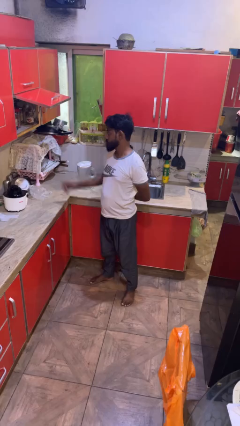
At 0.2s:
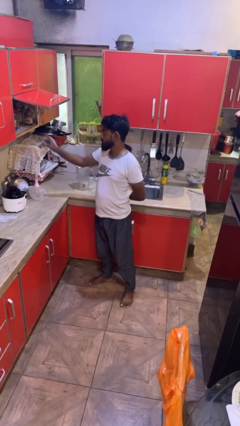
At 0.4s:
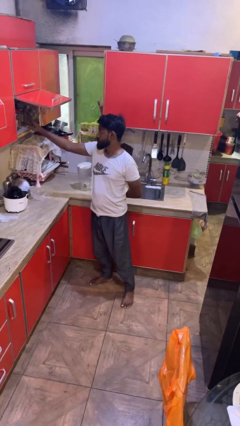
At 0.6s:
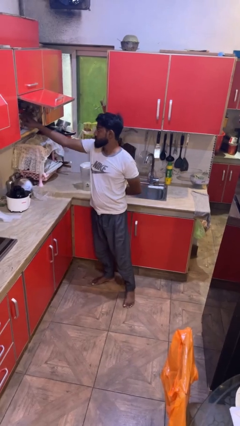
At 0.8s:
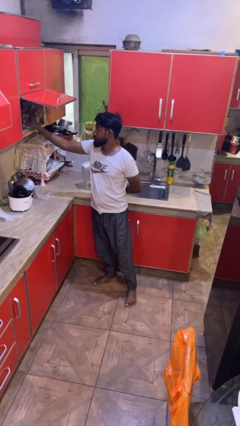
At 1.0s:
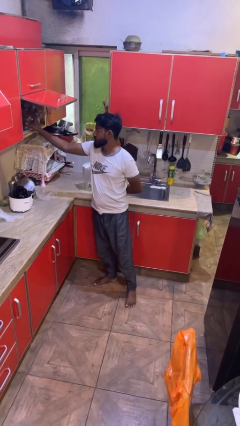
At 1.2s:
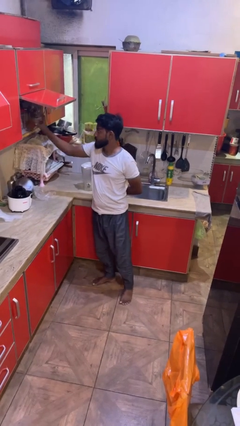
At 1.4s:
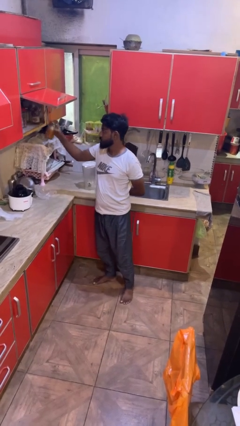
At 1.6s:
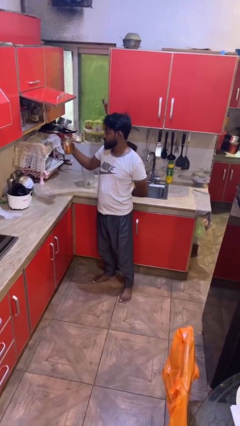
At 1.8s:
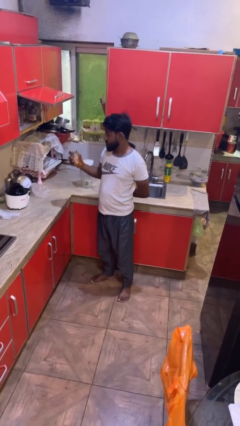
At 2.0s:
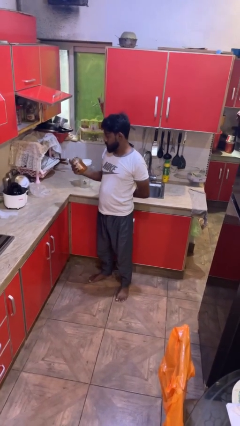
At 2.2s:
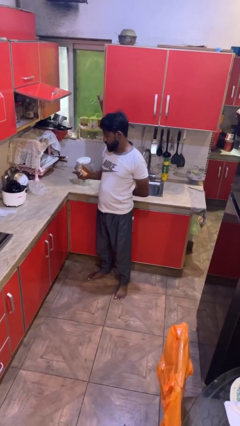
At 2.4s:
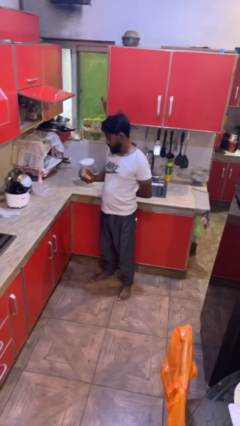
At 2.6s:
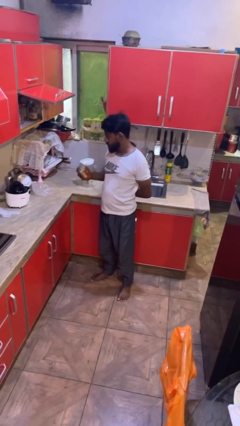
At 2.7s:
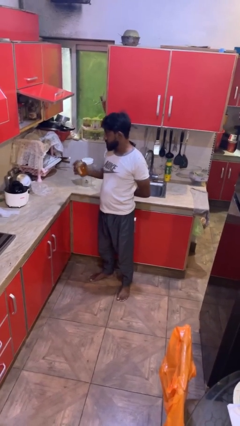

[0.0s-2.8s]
person picks up object from cabinet

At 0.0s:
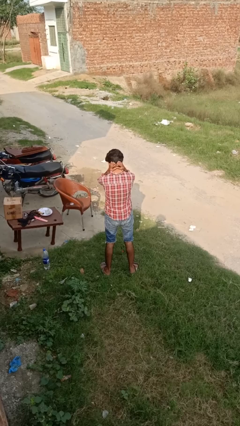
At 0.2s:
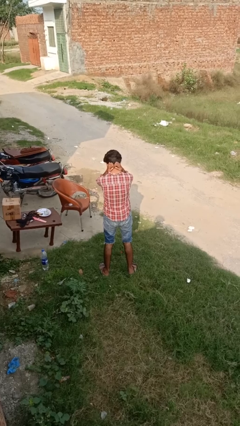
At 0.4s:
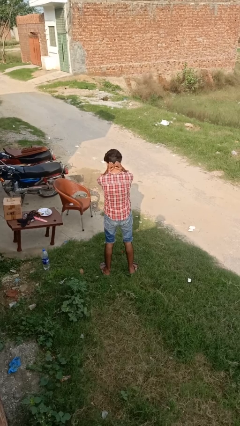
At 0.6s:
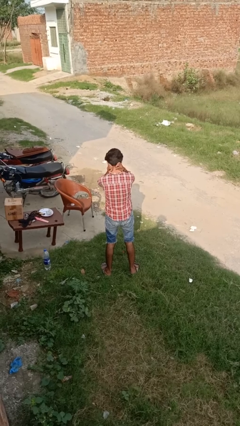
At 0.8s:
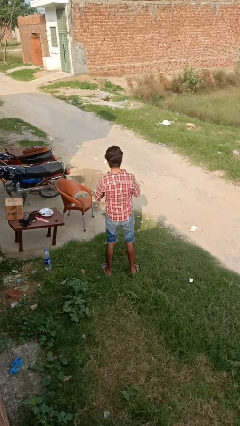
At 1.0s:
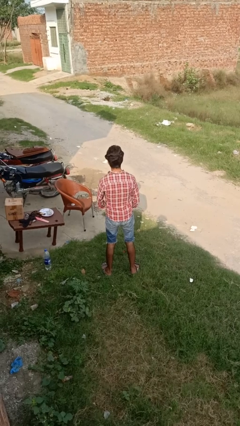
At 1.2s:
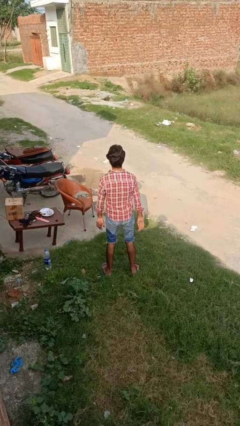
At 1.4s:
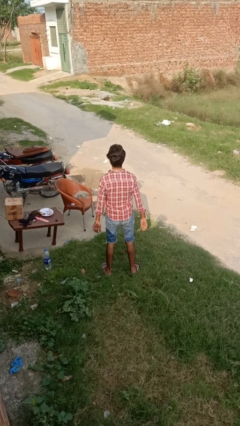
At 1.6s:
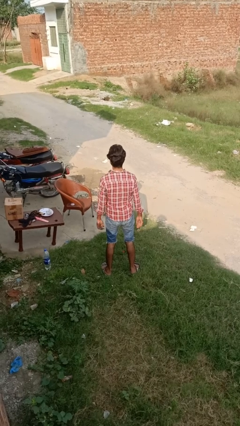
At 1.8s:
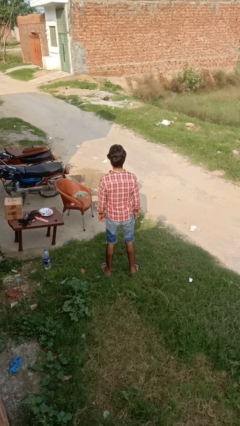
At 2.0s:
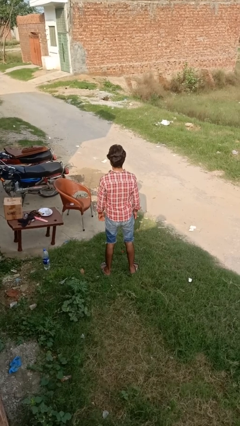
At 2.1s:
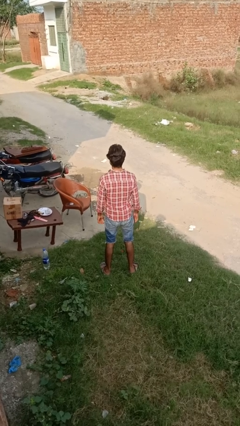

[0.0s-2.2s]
person takes off necklace

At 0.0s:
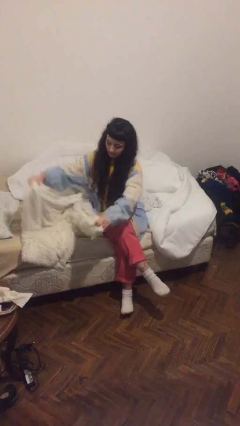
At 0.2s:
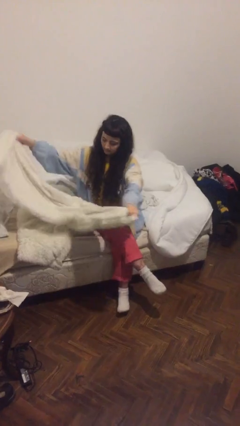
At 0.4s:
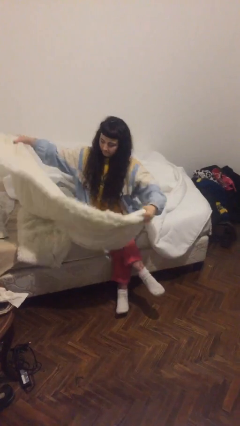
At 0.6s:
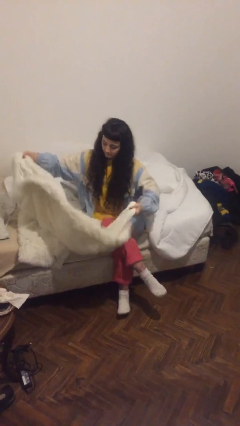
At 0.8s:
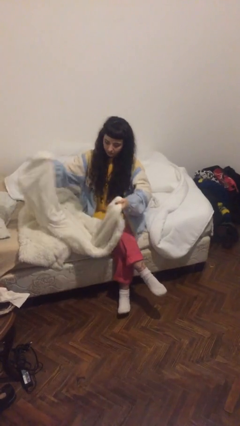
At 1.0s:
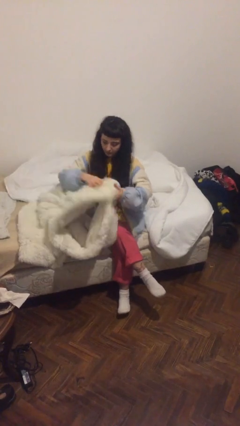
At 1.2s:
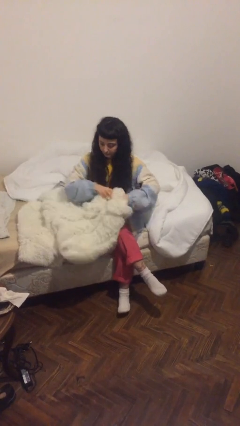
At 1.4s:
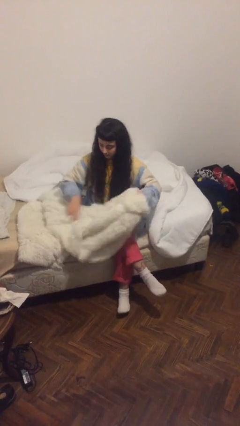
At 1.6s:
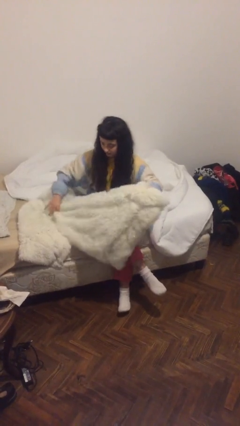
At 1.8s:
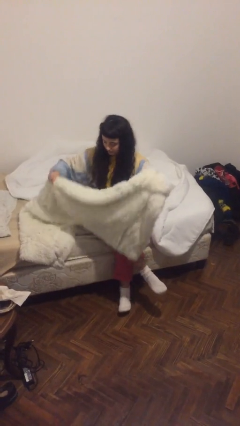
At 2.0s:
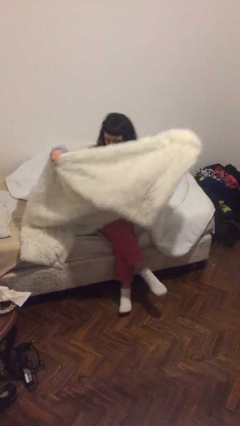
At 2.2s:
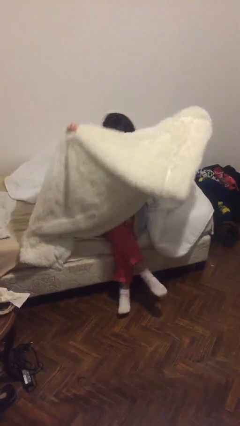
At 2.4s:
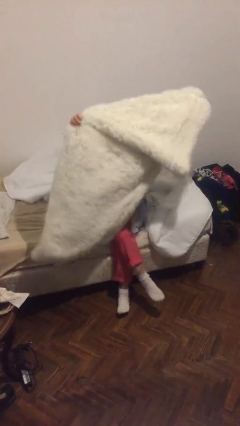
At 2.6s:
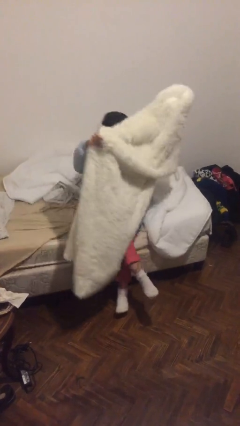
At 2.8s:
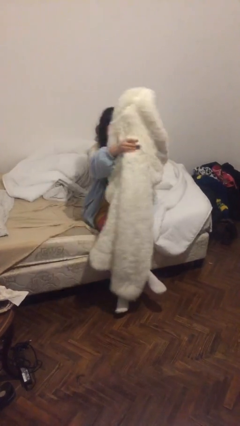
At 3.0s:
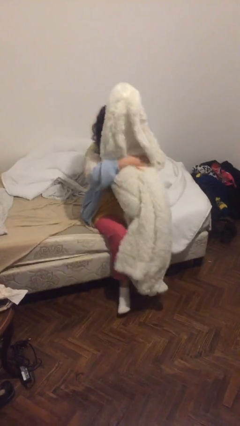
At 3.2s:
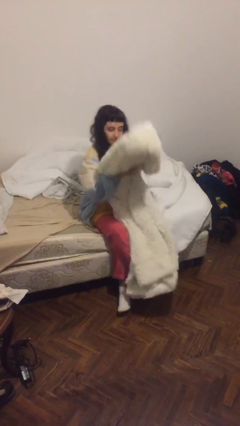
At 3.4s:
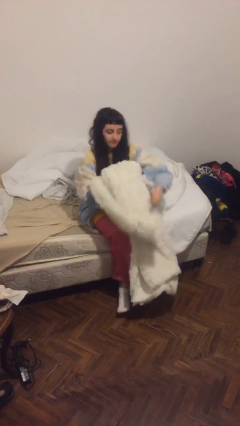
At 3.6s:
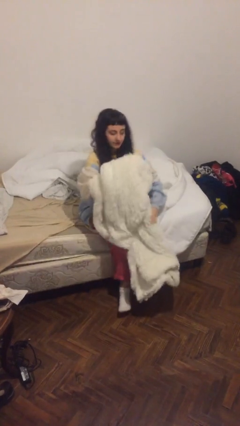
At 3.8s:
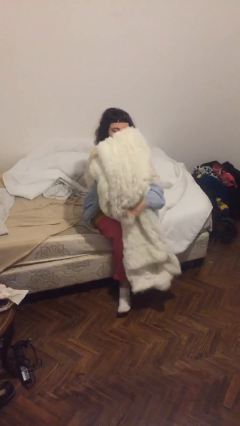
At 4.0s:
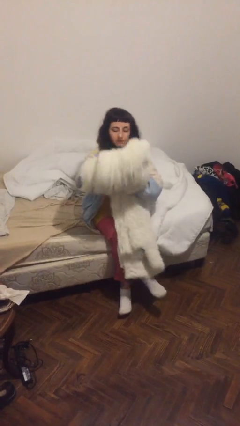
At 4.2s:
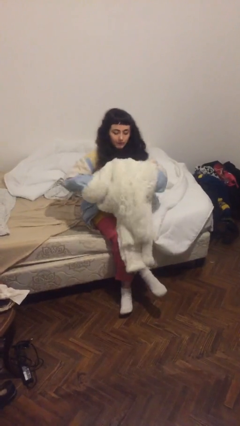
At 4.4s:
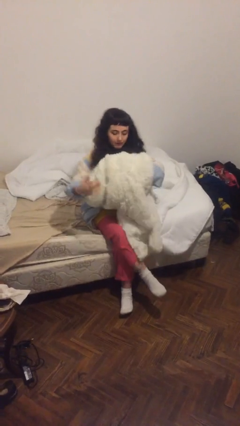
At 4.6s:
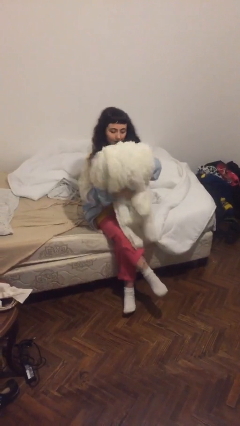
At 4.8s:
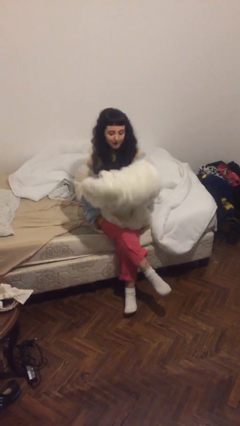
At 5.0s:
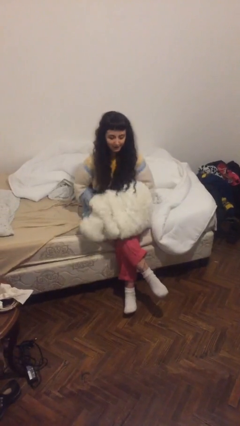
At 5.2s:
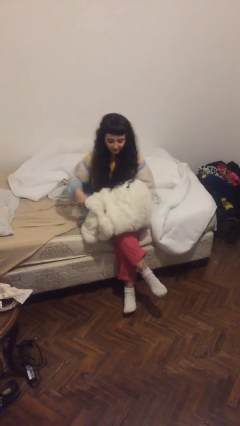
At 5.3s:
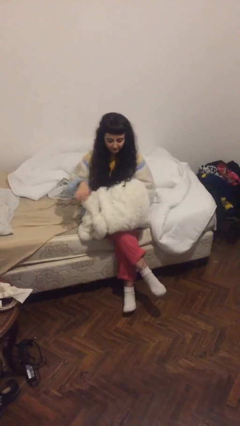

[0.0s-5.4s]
person folds blanket

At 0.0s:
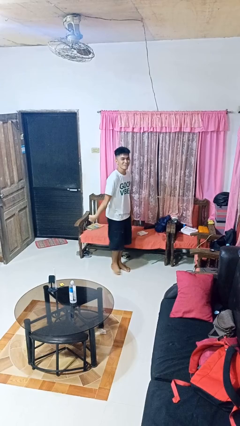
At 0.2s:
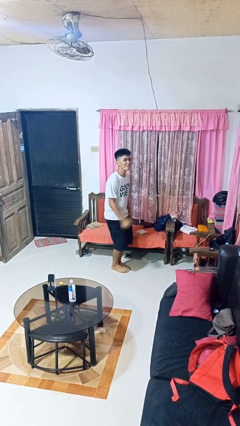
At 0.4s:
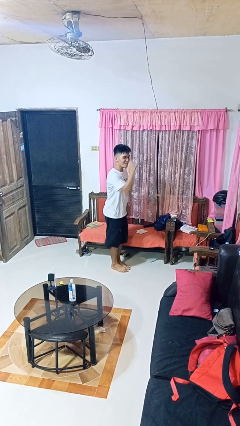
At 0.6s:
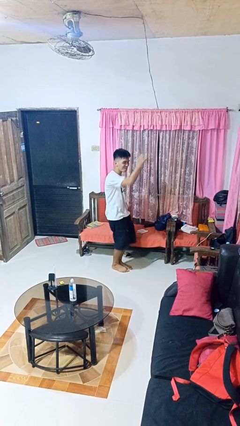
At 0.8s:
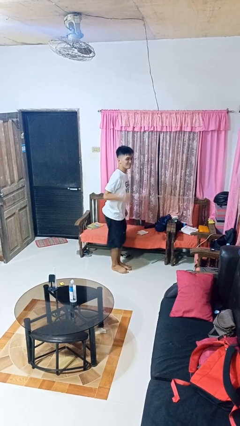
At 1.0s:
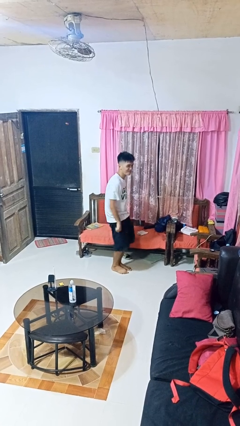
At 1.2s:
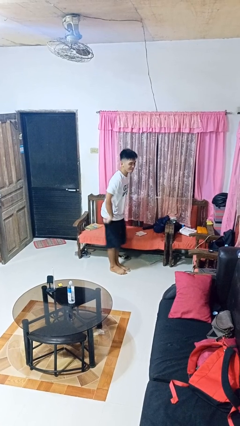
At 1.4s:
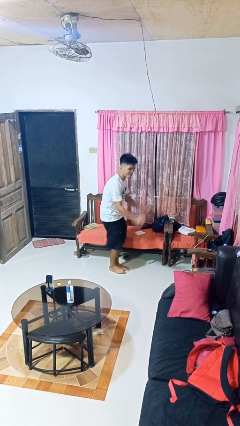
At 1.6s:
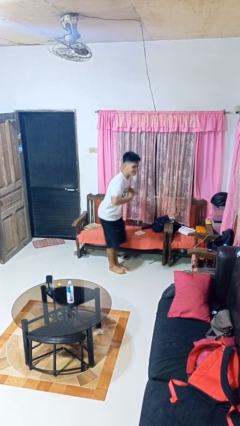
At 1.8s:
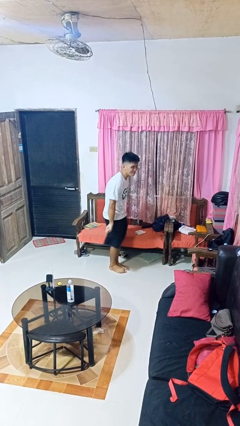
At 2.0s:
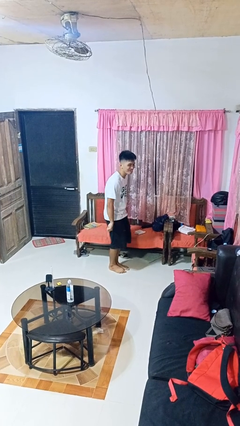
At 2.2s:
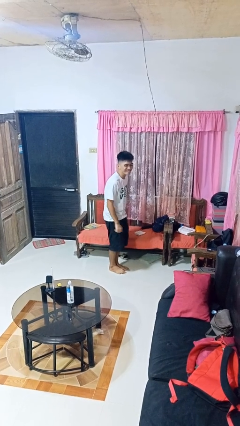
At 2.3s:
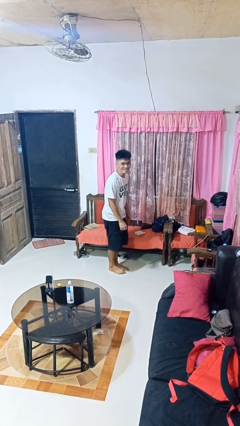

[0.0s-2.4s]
person dances in place

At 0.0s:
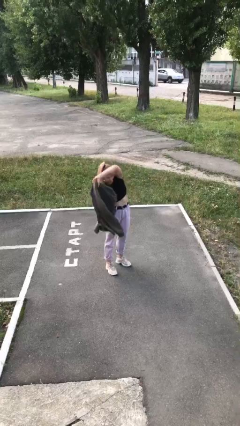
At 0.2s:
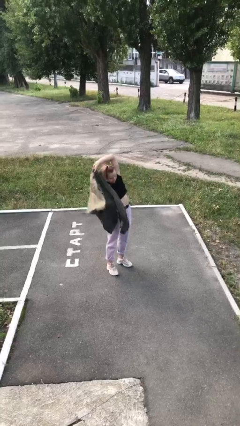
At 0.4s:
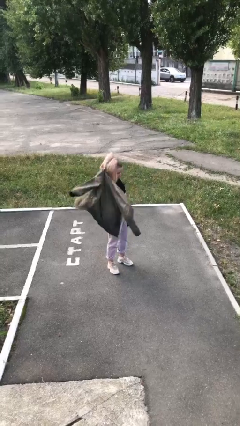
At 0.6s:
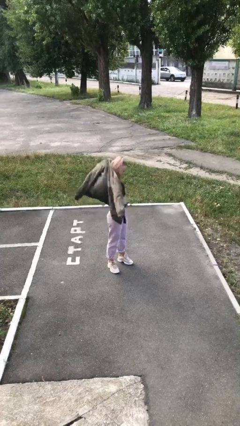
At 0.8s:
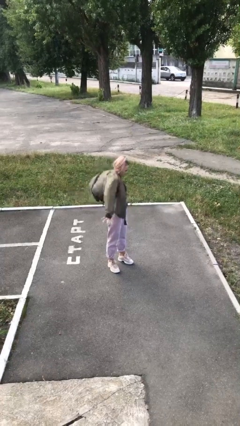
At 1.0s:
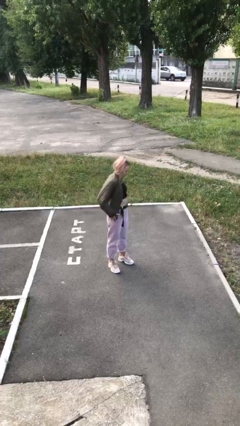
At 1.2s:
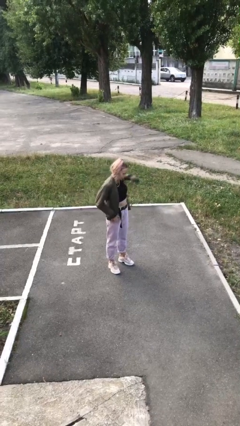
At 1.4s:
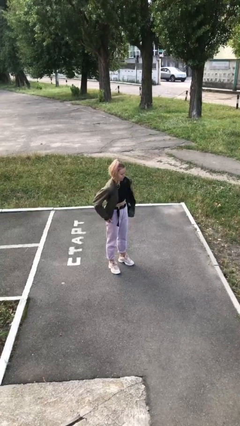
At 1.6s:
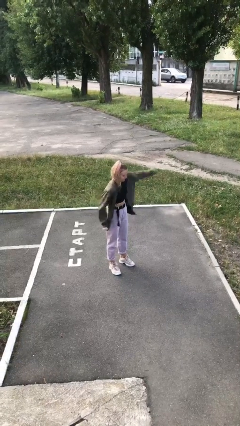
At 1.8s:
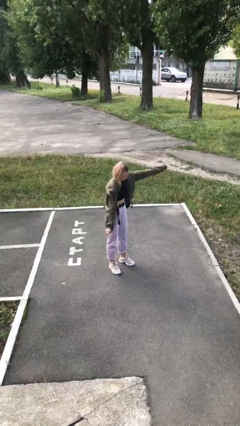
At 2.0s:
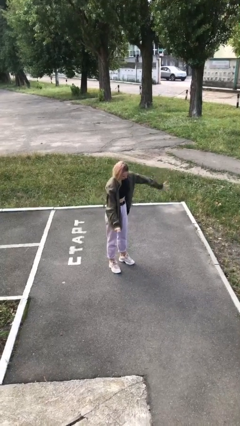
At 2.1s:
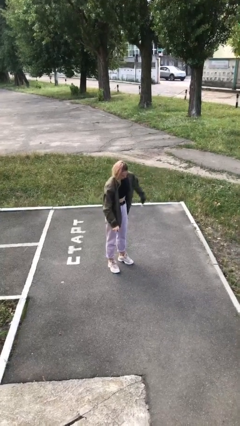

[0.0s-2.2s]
person puts on jacket

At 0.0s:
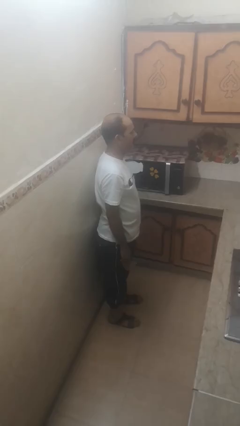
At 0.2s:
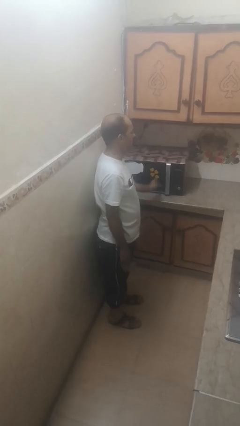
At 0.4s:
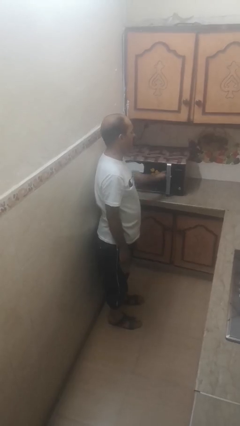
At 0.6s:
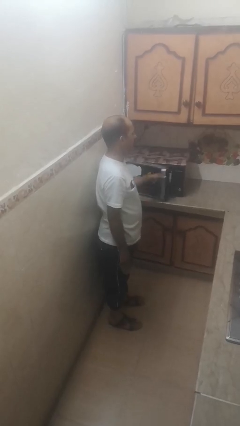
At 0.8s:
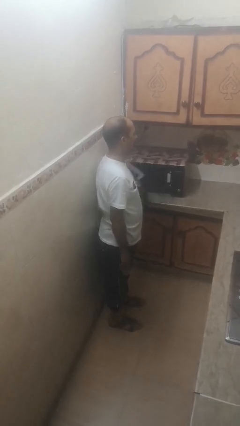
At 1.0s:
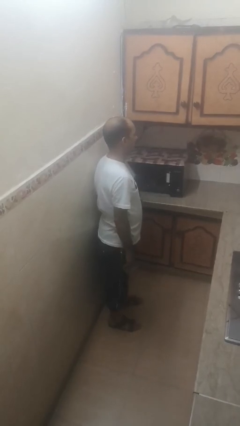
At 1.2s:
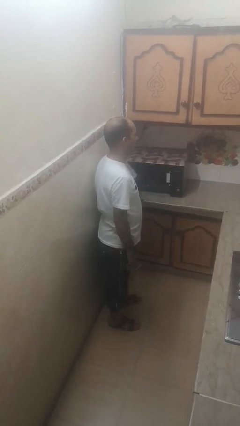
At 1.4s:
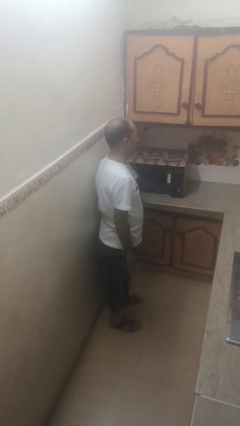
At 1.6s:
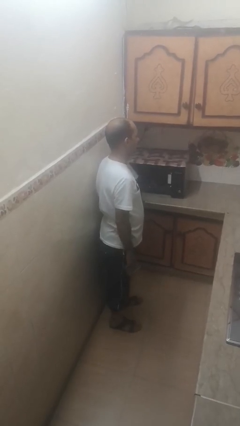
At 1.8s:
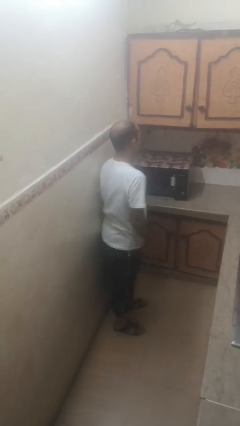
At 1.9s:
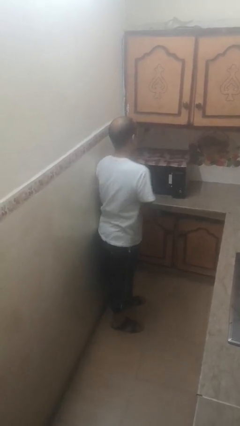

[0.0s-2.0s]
person opens microwave

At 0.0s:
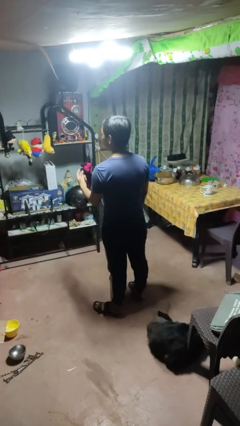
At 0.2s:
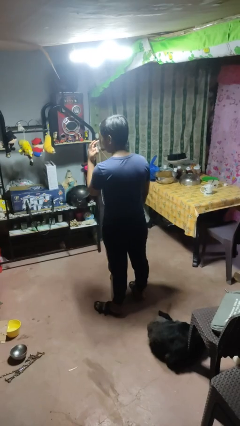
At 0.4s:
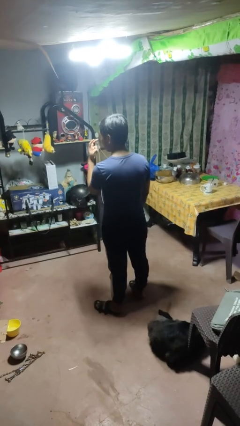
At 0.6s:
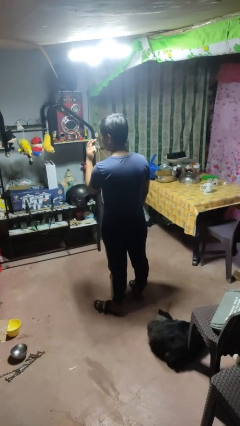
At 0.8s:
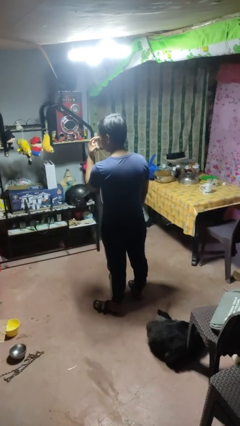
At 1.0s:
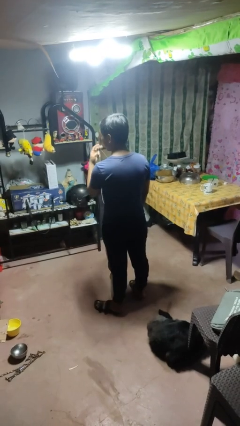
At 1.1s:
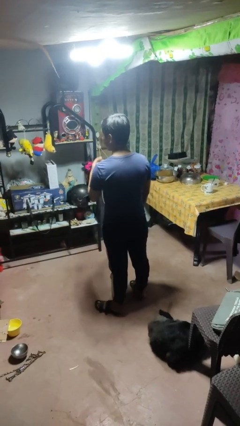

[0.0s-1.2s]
person gestures watch closely
